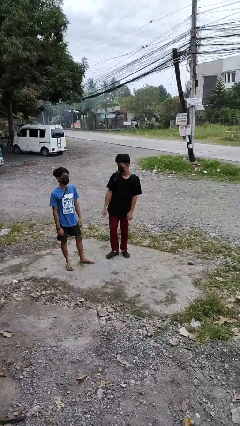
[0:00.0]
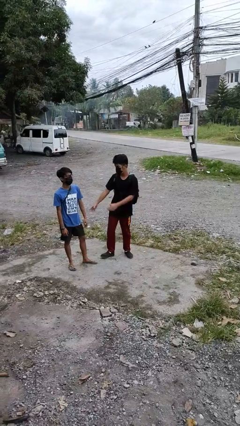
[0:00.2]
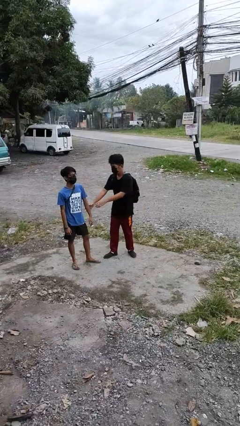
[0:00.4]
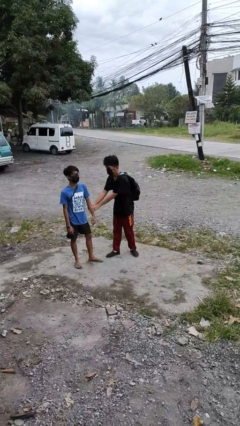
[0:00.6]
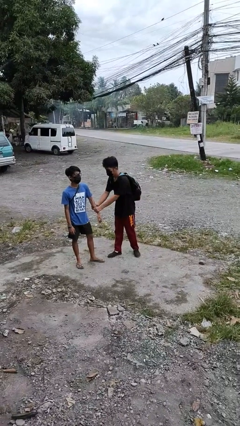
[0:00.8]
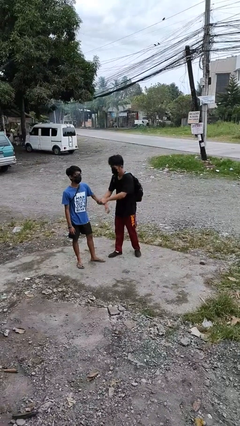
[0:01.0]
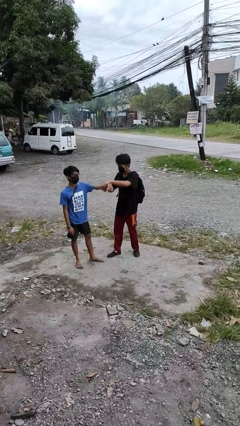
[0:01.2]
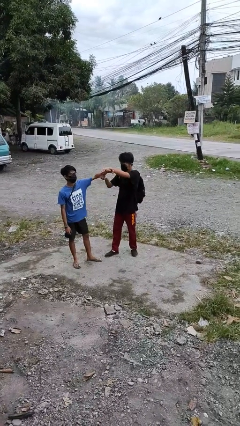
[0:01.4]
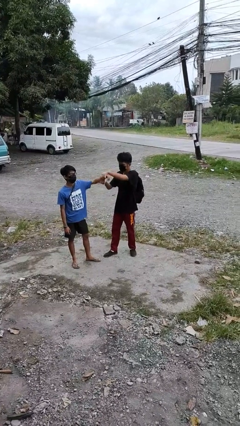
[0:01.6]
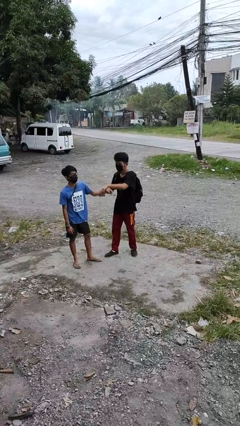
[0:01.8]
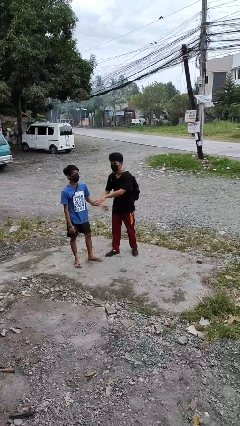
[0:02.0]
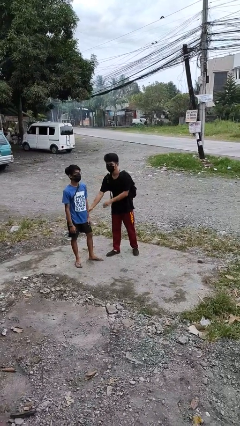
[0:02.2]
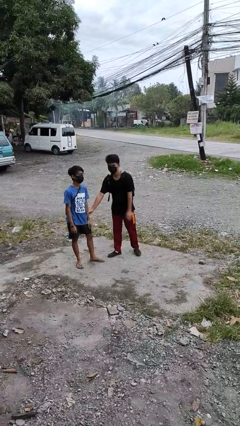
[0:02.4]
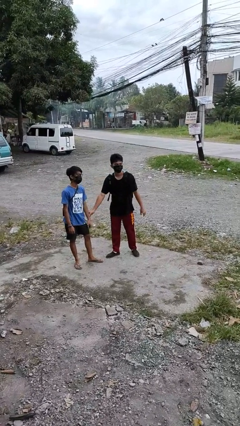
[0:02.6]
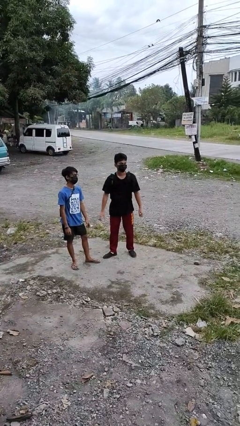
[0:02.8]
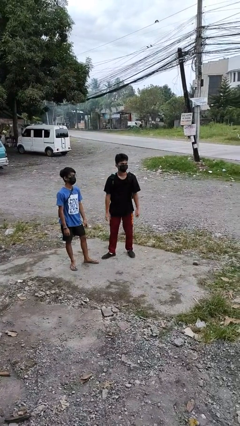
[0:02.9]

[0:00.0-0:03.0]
person grabs person by forearm

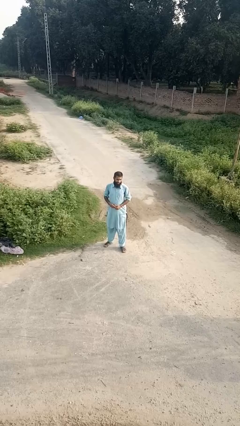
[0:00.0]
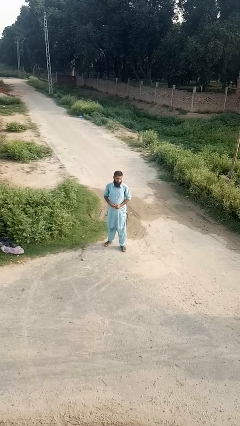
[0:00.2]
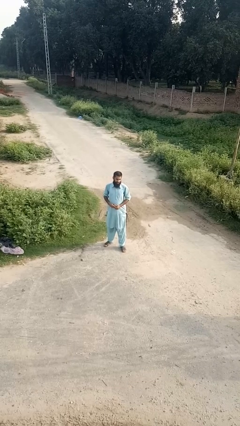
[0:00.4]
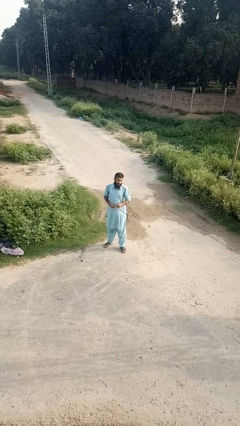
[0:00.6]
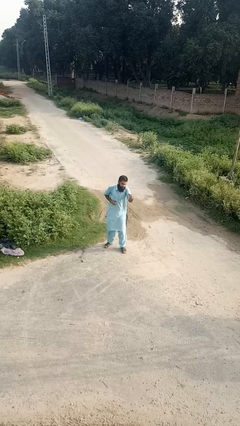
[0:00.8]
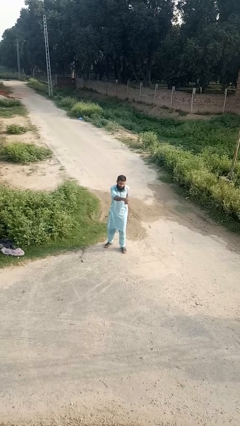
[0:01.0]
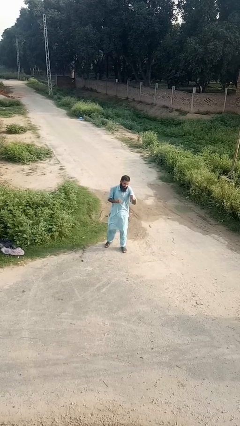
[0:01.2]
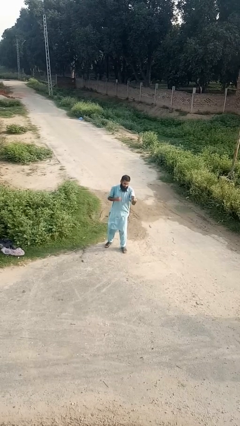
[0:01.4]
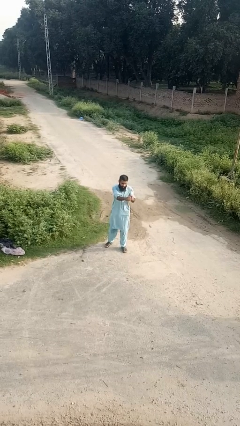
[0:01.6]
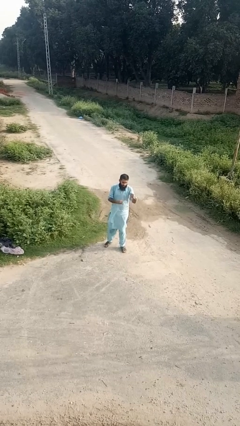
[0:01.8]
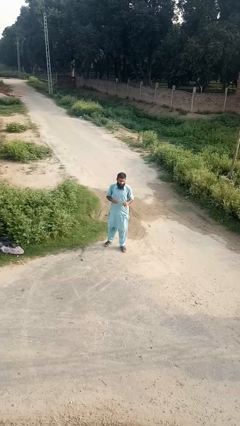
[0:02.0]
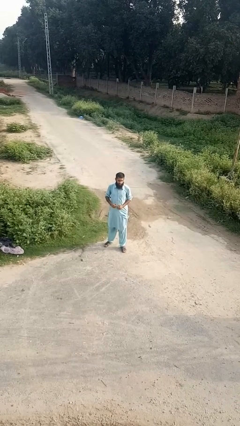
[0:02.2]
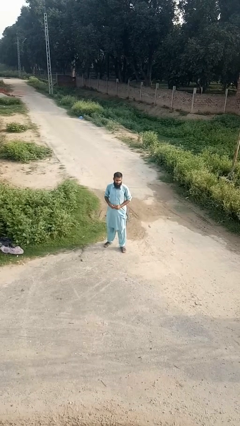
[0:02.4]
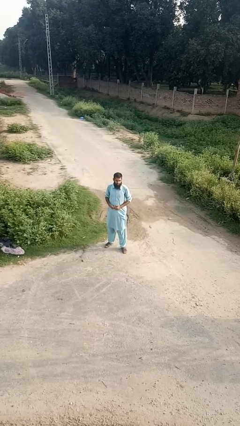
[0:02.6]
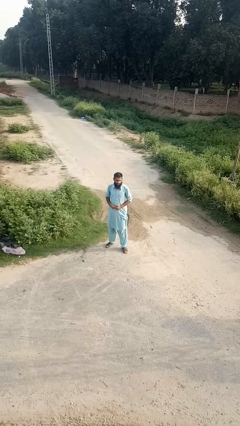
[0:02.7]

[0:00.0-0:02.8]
person punches

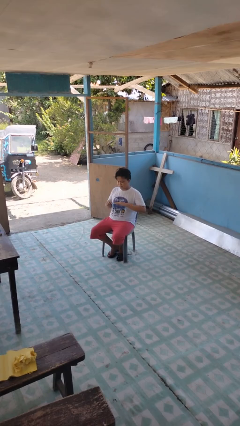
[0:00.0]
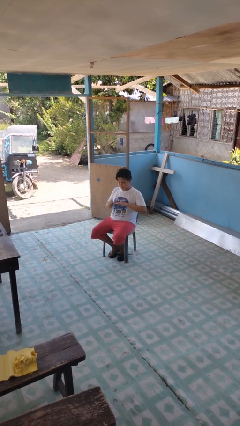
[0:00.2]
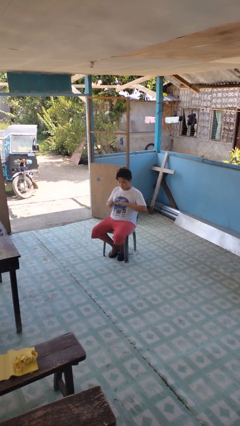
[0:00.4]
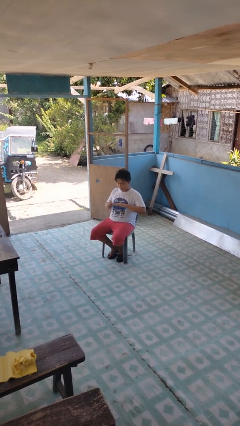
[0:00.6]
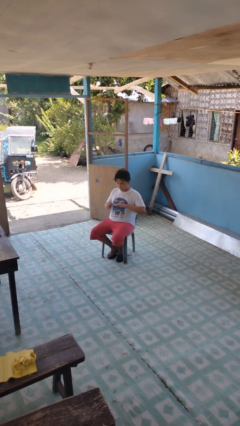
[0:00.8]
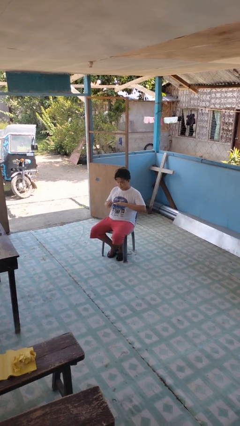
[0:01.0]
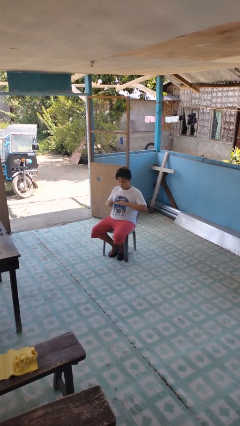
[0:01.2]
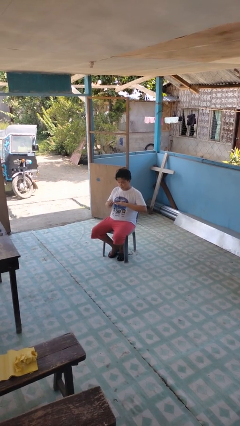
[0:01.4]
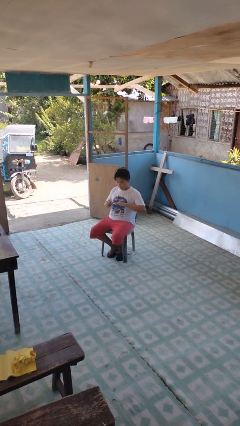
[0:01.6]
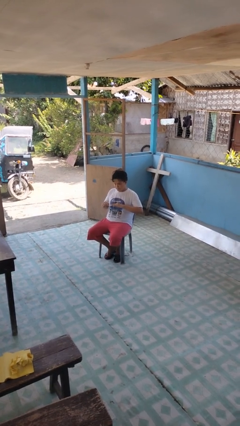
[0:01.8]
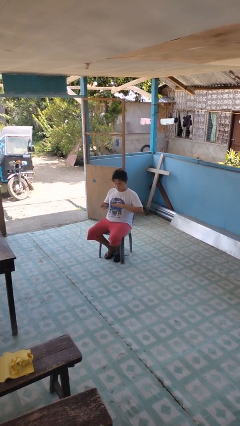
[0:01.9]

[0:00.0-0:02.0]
person files fingernails

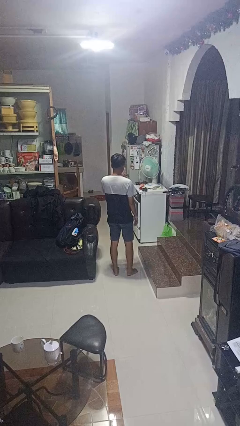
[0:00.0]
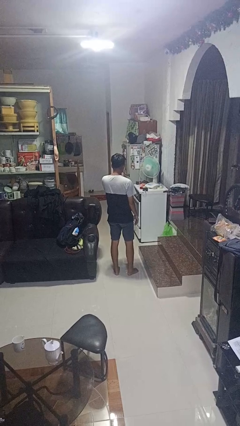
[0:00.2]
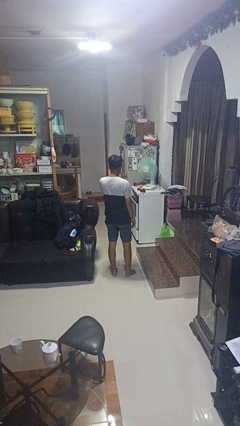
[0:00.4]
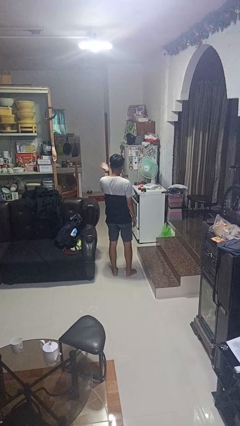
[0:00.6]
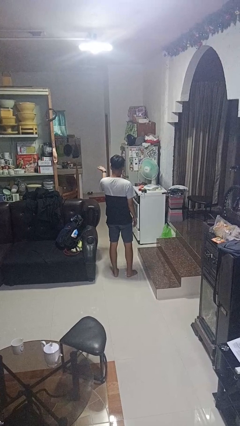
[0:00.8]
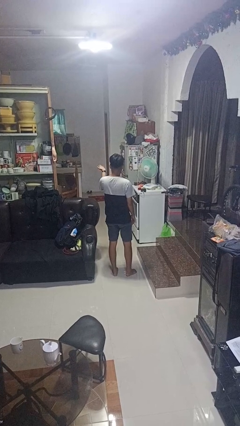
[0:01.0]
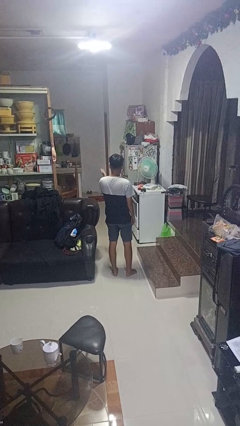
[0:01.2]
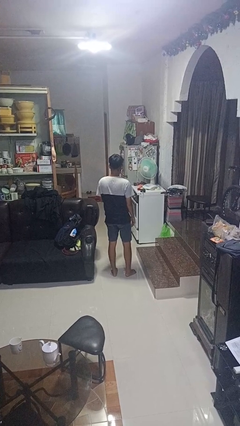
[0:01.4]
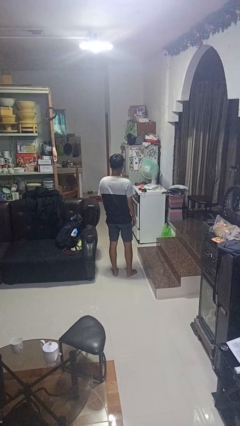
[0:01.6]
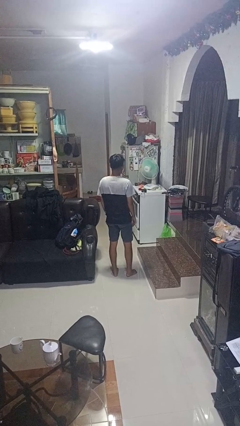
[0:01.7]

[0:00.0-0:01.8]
person gestures blow kiss

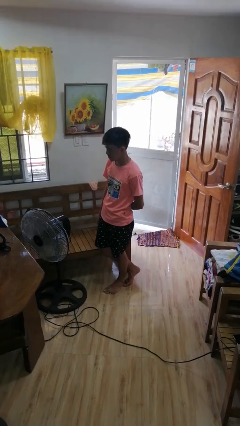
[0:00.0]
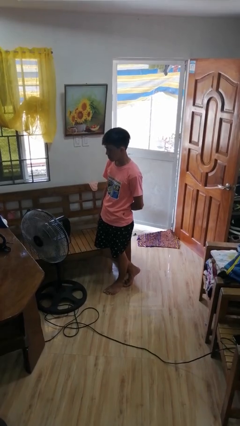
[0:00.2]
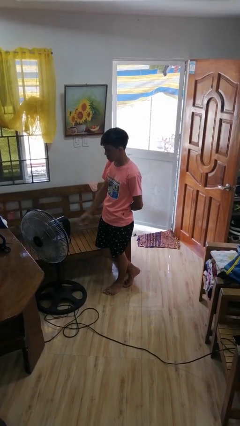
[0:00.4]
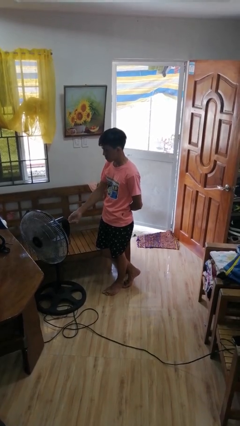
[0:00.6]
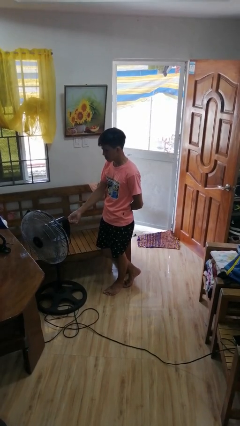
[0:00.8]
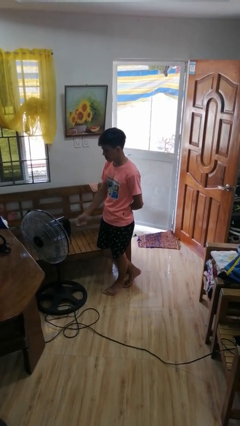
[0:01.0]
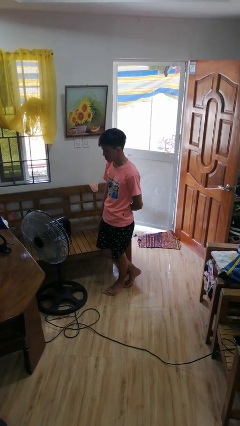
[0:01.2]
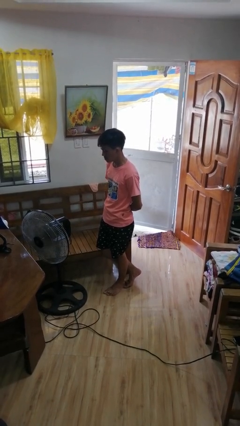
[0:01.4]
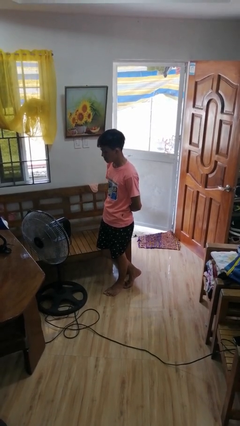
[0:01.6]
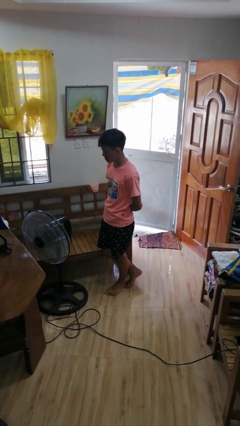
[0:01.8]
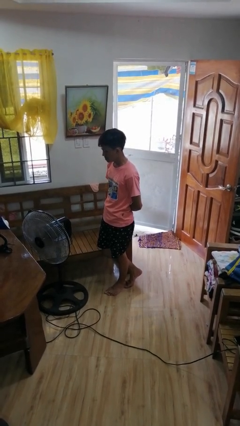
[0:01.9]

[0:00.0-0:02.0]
person turns on fan

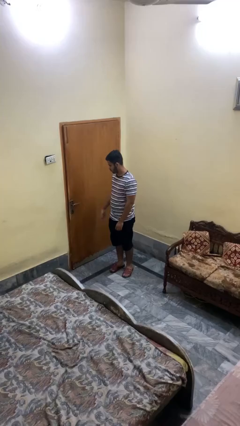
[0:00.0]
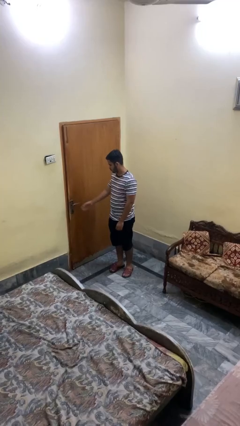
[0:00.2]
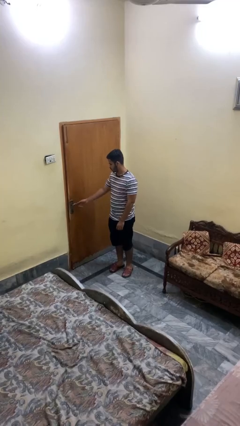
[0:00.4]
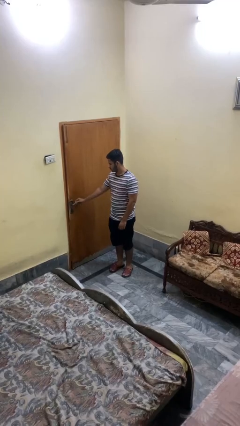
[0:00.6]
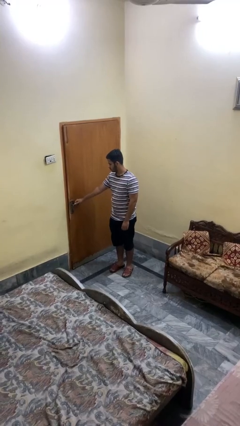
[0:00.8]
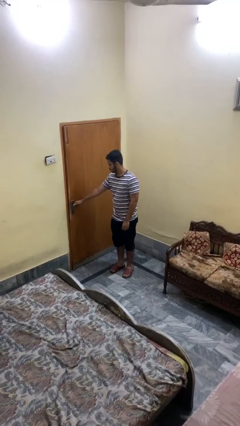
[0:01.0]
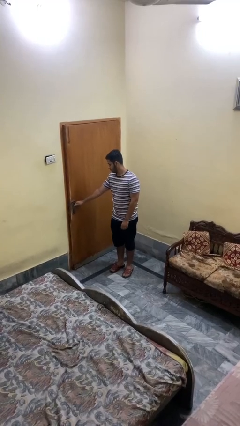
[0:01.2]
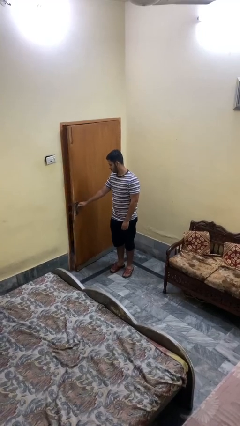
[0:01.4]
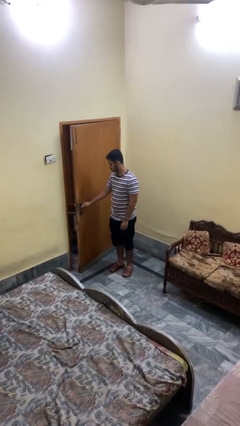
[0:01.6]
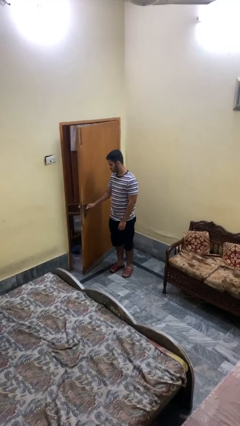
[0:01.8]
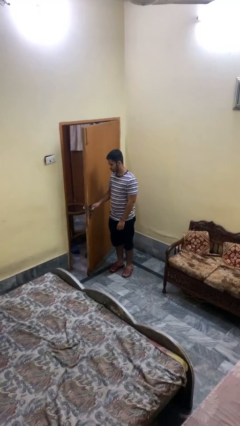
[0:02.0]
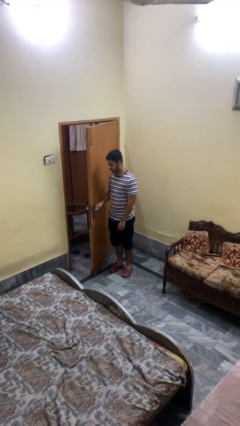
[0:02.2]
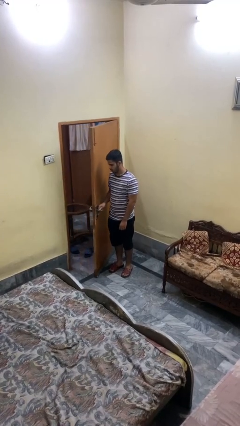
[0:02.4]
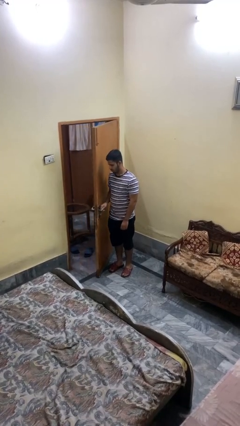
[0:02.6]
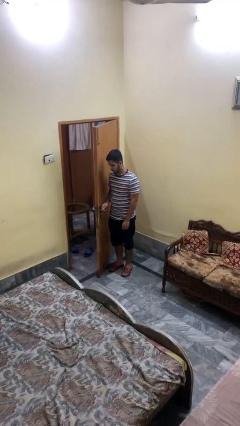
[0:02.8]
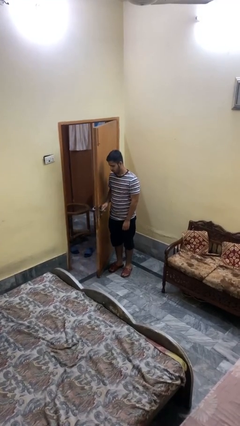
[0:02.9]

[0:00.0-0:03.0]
person opens facility door

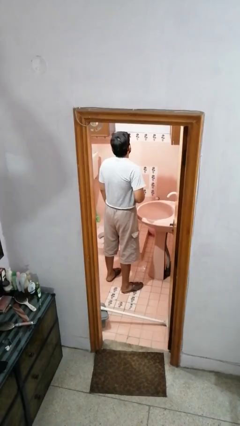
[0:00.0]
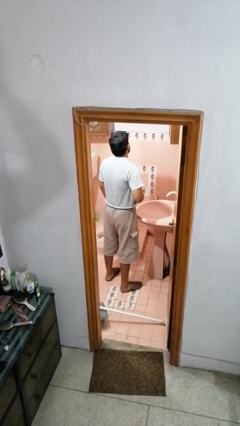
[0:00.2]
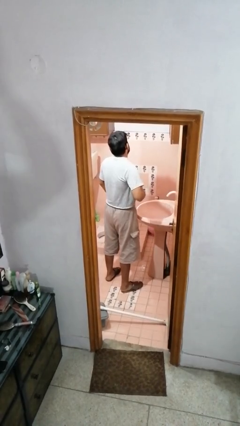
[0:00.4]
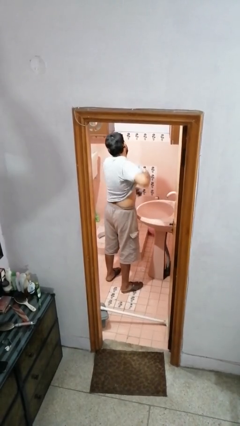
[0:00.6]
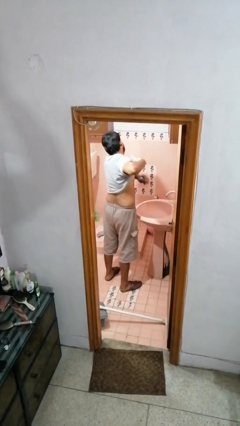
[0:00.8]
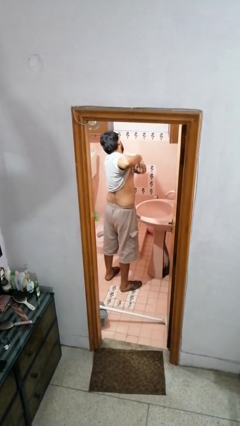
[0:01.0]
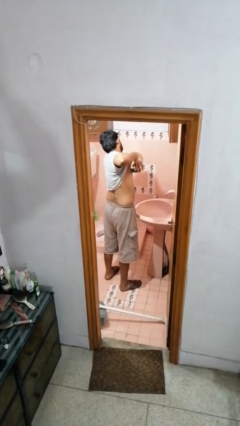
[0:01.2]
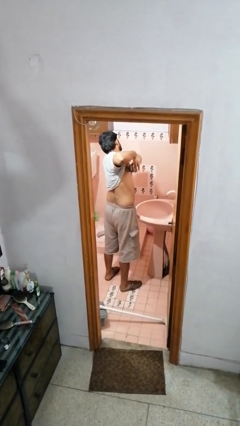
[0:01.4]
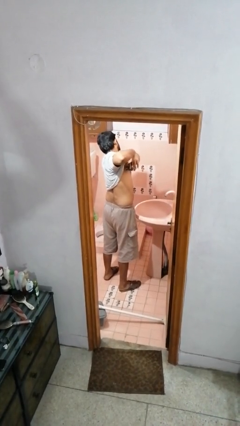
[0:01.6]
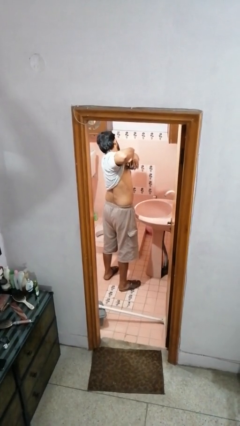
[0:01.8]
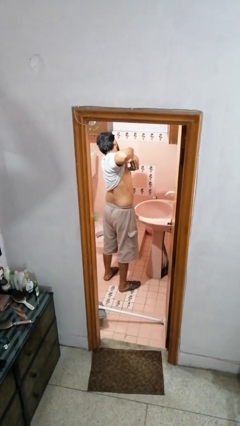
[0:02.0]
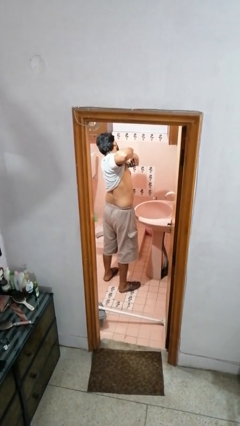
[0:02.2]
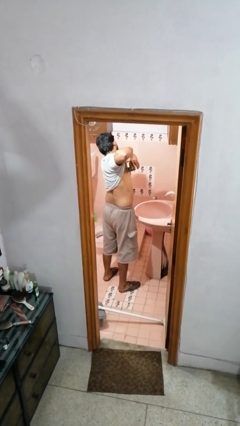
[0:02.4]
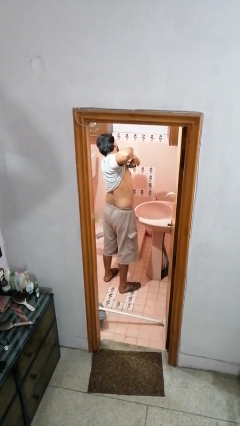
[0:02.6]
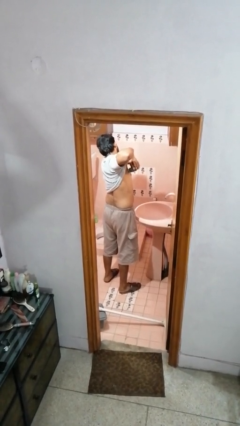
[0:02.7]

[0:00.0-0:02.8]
person applies deodorant
